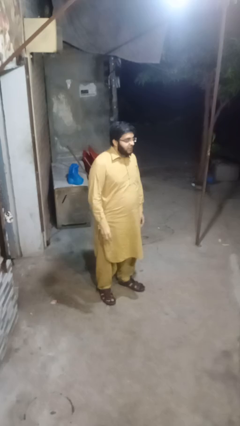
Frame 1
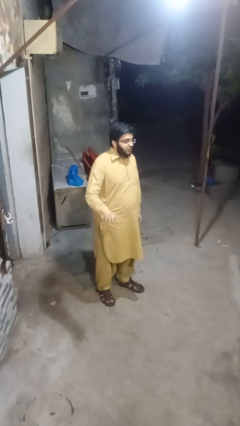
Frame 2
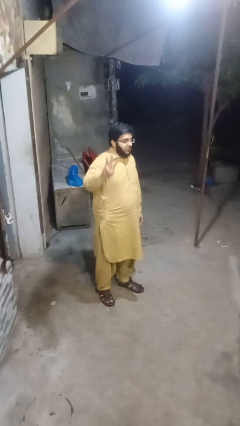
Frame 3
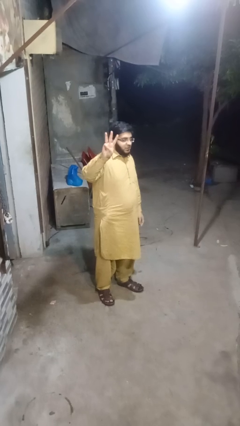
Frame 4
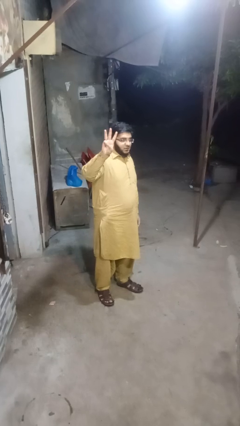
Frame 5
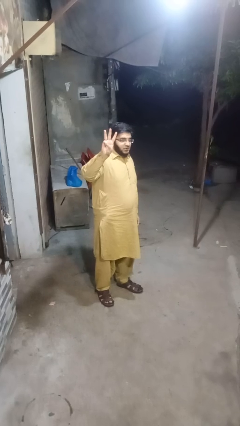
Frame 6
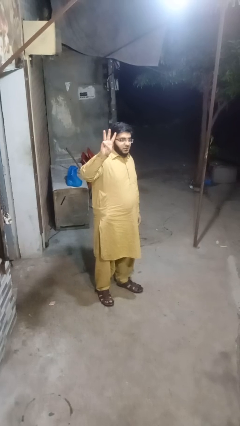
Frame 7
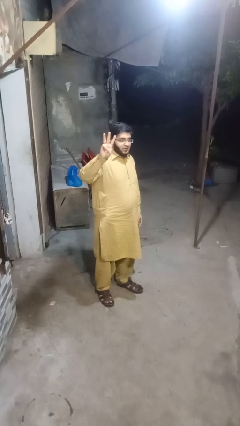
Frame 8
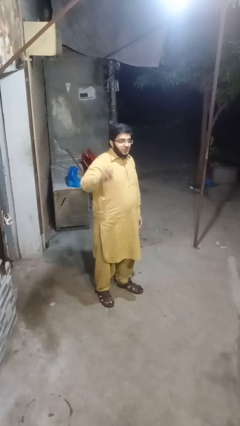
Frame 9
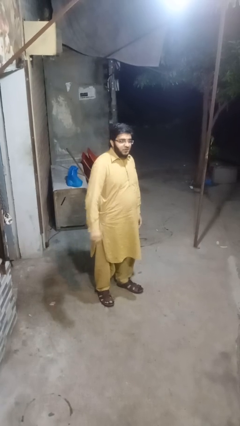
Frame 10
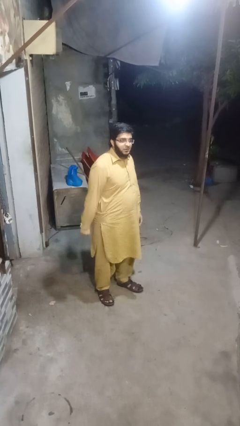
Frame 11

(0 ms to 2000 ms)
person gestures number three

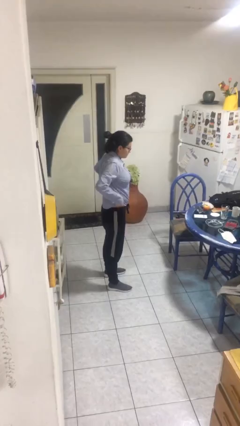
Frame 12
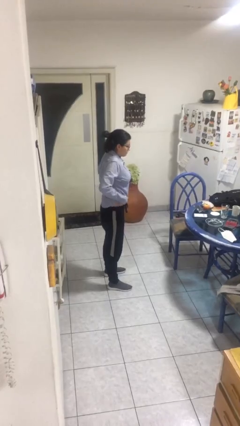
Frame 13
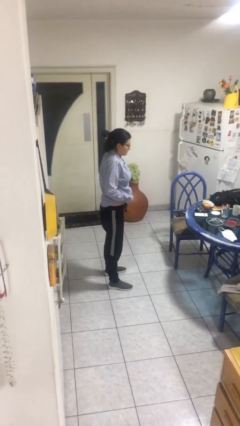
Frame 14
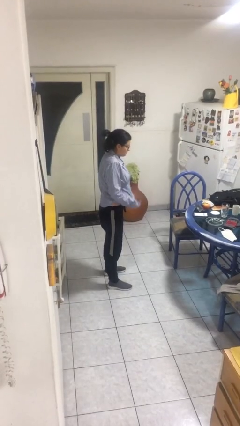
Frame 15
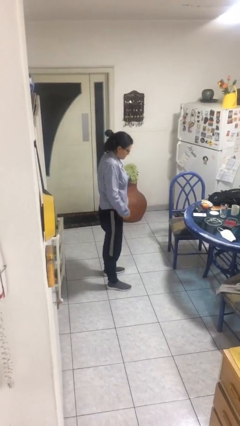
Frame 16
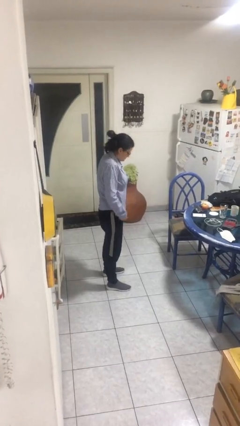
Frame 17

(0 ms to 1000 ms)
person untucks shirt

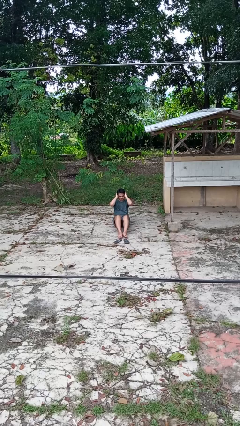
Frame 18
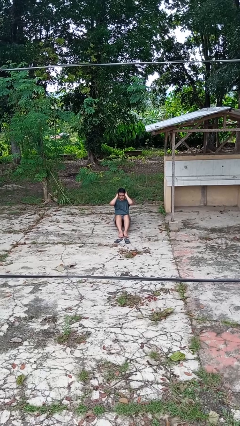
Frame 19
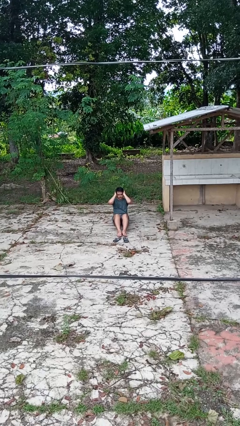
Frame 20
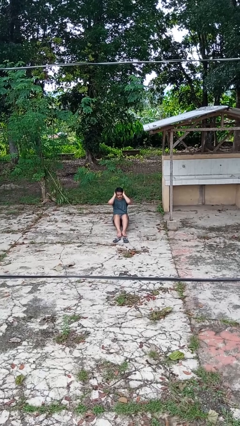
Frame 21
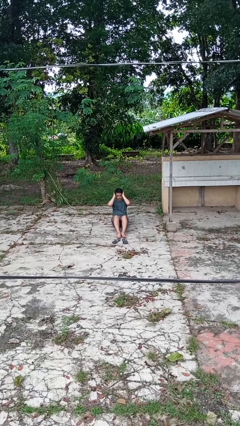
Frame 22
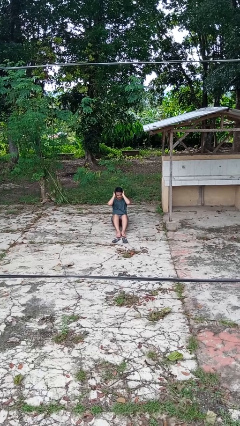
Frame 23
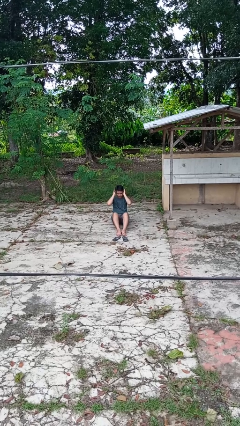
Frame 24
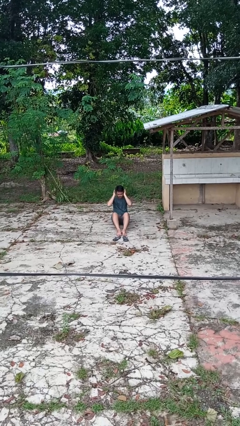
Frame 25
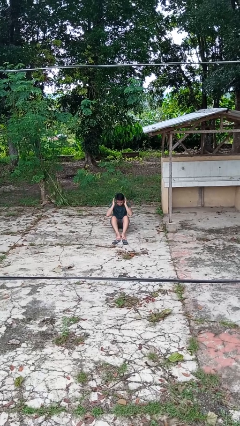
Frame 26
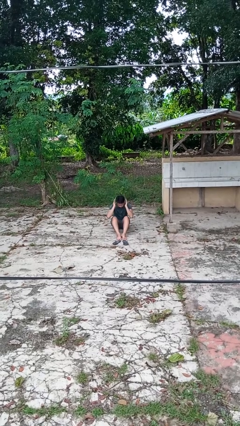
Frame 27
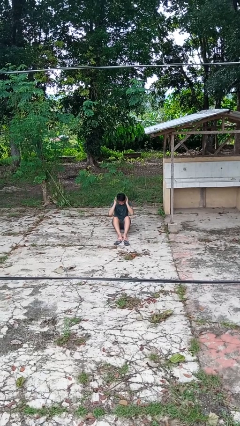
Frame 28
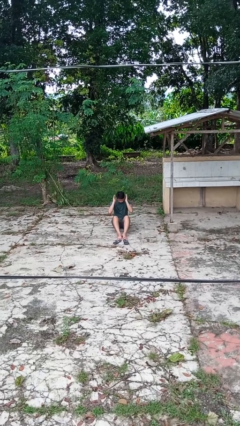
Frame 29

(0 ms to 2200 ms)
person exercises with situp

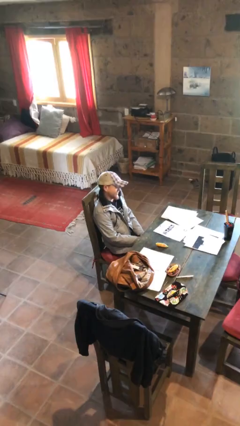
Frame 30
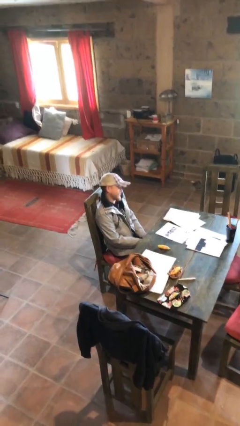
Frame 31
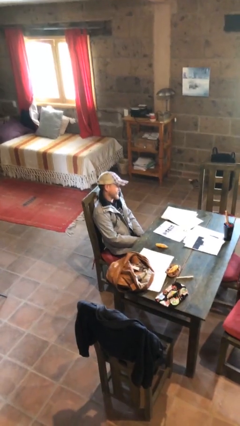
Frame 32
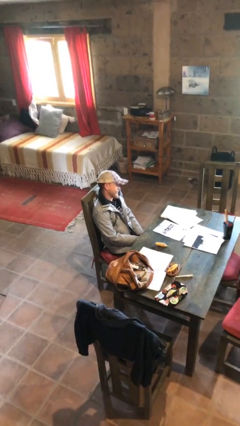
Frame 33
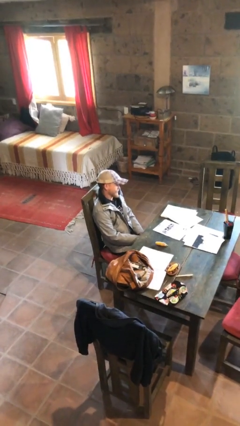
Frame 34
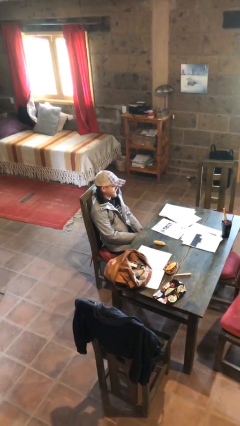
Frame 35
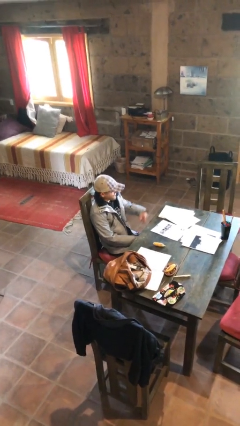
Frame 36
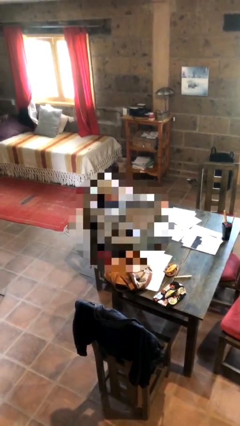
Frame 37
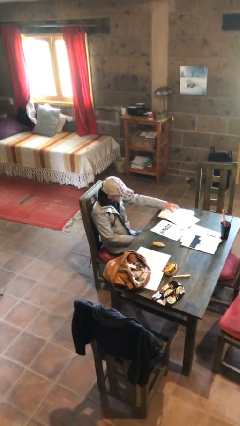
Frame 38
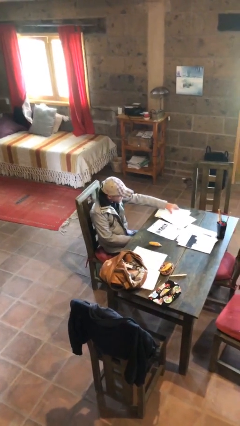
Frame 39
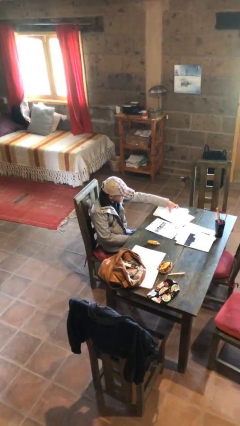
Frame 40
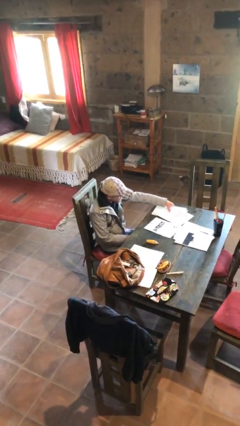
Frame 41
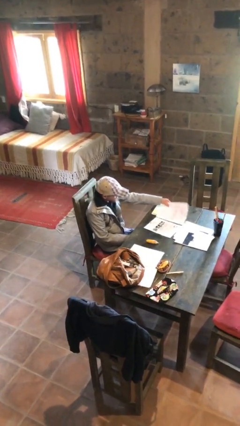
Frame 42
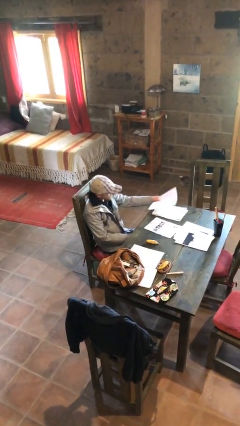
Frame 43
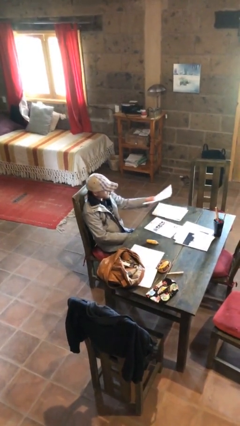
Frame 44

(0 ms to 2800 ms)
person picks up object from table

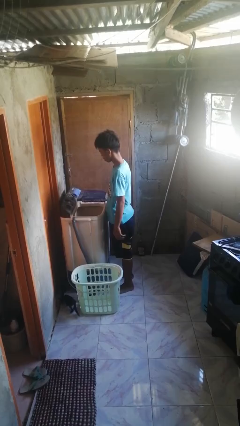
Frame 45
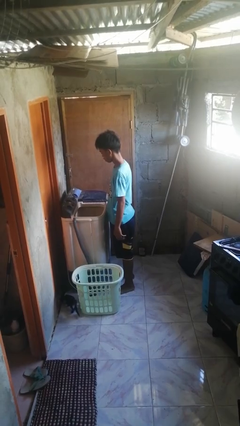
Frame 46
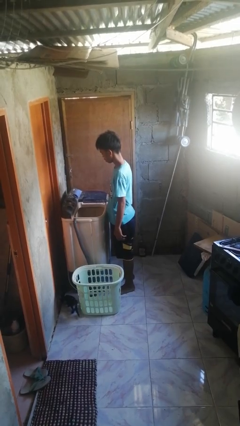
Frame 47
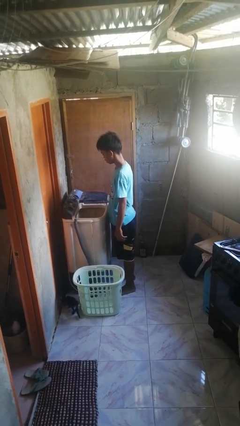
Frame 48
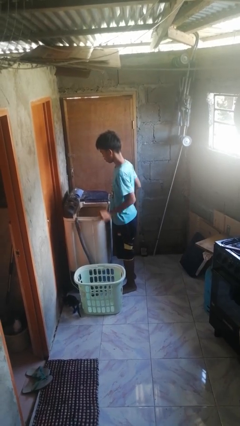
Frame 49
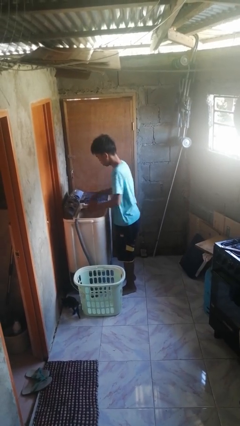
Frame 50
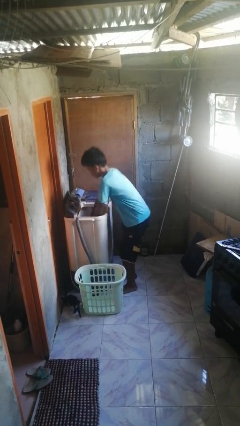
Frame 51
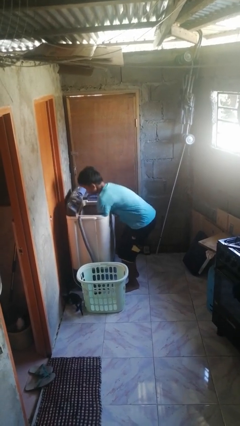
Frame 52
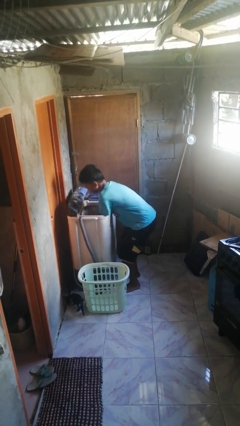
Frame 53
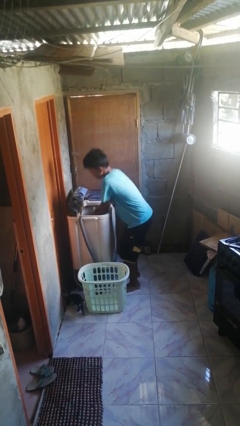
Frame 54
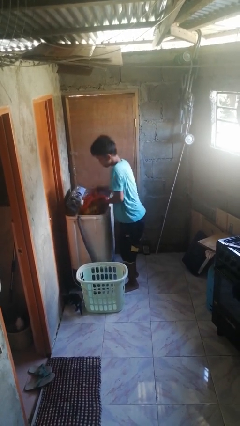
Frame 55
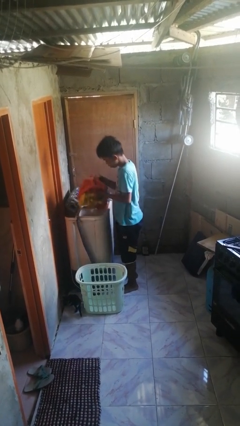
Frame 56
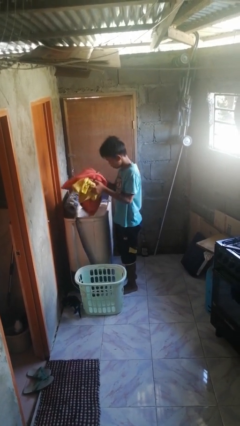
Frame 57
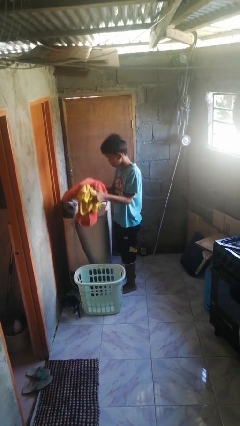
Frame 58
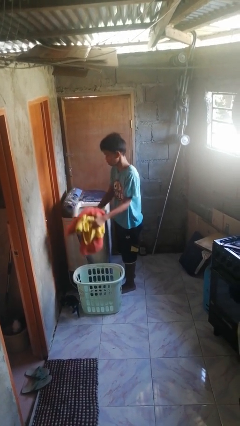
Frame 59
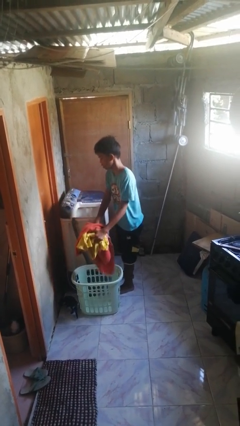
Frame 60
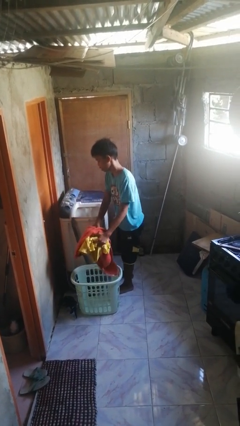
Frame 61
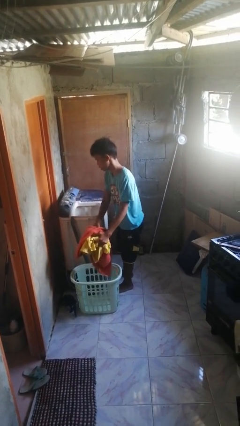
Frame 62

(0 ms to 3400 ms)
person unloads clotheswasher

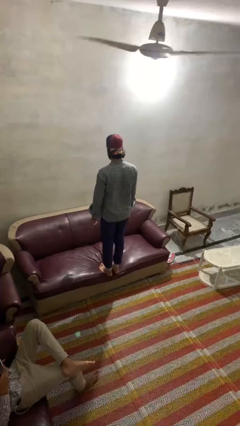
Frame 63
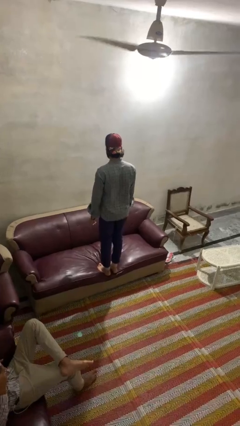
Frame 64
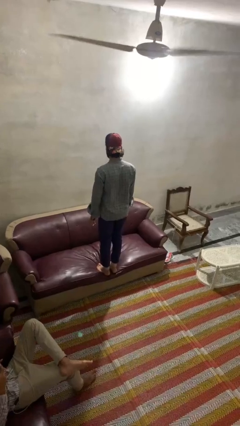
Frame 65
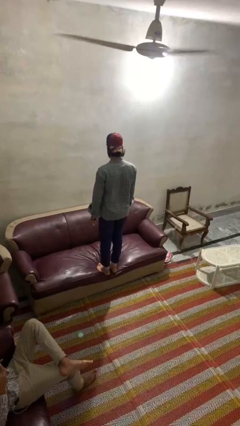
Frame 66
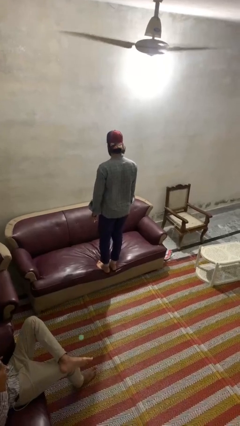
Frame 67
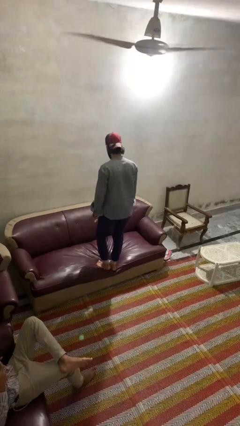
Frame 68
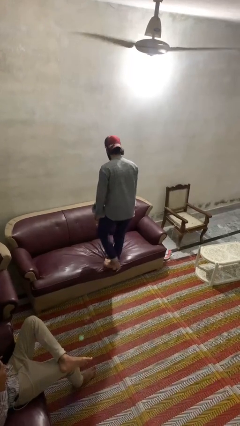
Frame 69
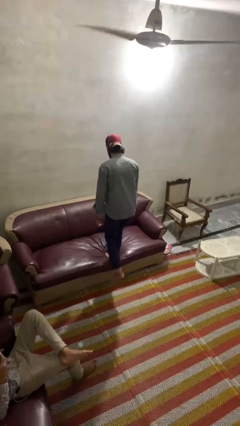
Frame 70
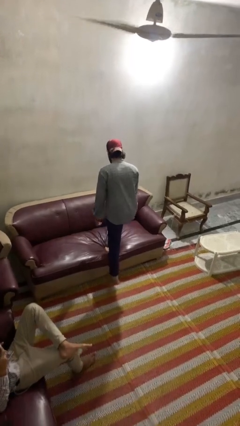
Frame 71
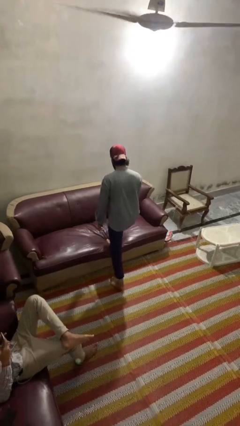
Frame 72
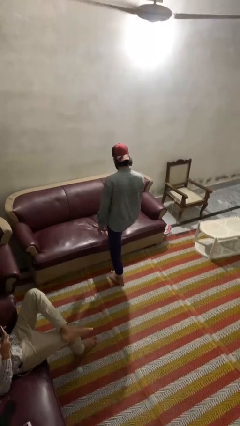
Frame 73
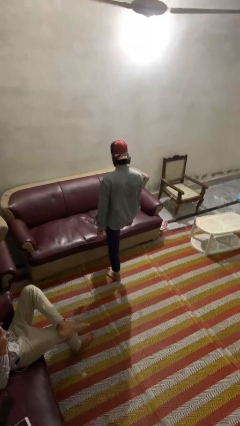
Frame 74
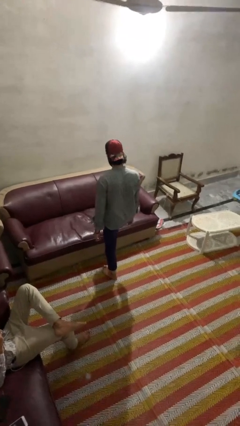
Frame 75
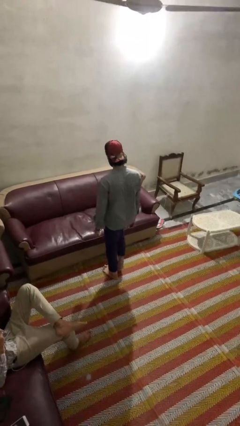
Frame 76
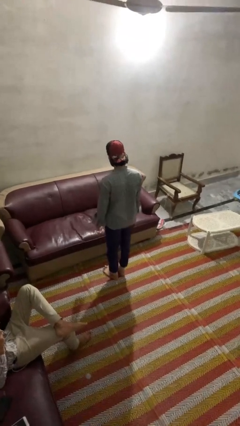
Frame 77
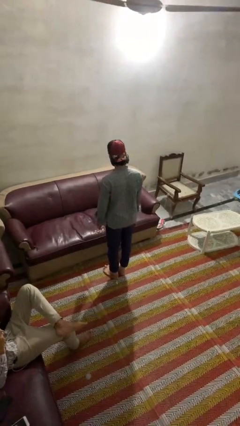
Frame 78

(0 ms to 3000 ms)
person climbs off couch

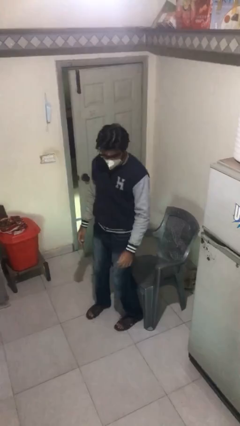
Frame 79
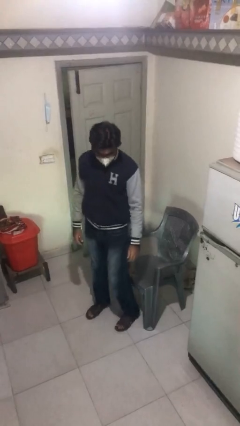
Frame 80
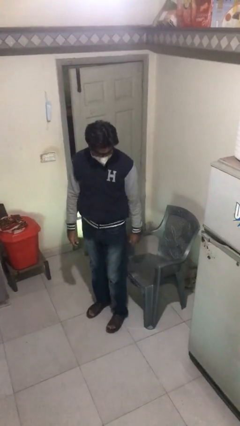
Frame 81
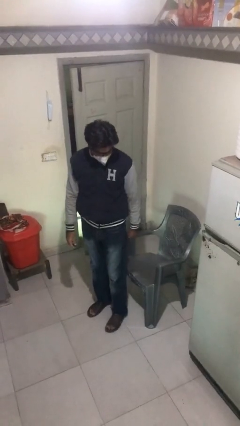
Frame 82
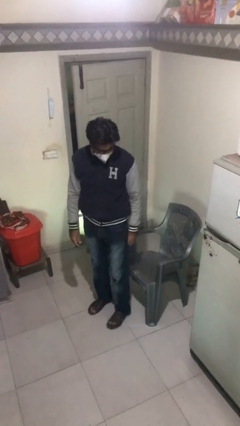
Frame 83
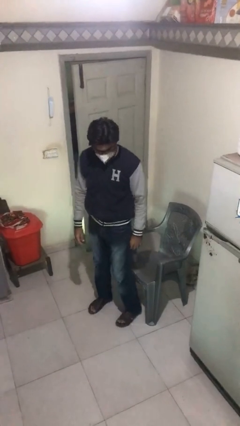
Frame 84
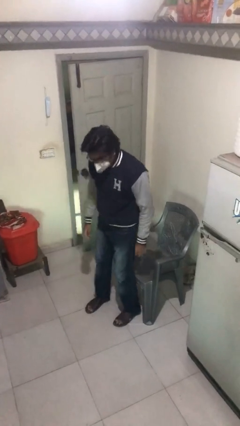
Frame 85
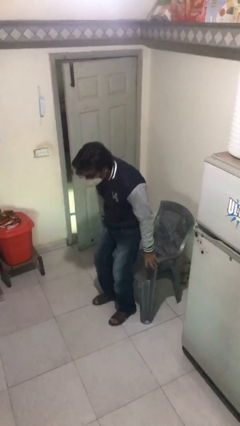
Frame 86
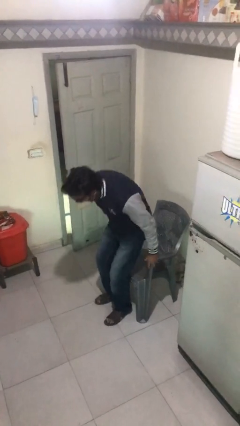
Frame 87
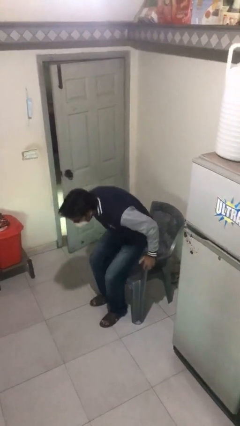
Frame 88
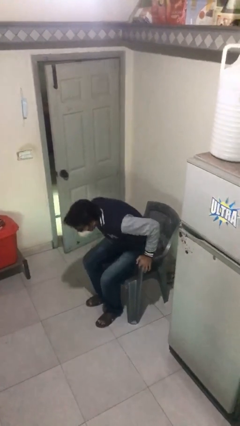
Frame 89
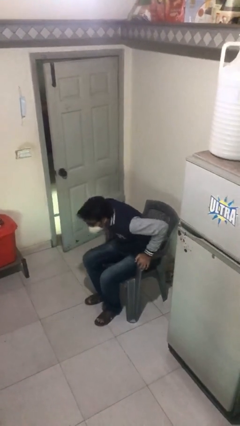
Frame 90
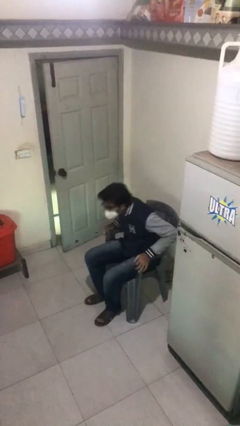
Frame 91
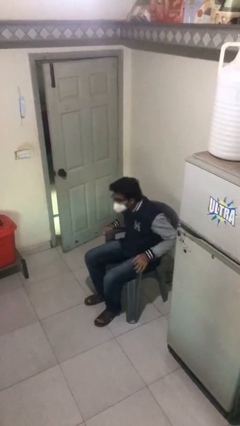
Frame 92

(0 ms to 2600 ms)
person sits down
